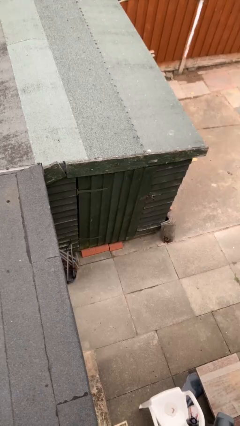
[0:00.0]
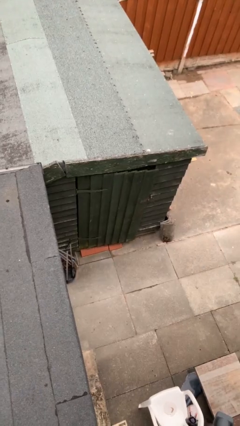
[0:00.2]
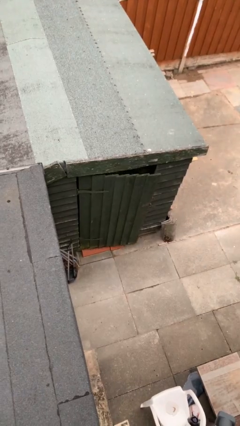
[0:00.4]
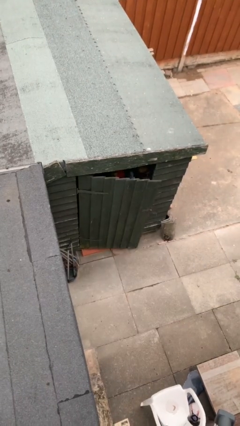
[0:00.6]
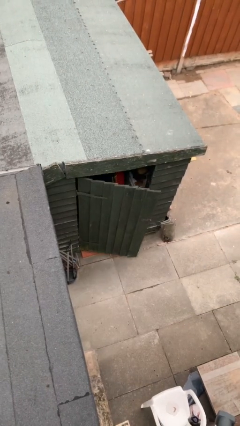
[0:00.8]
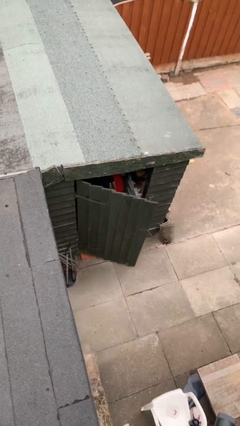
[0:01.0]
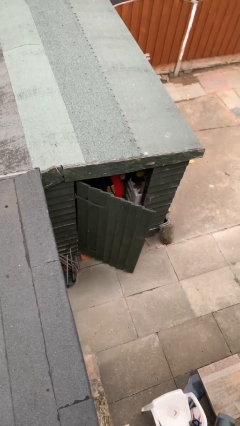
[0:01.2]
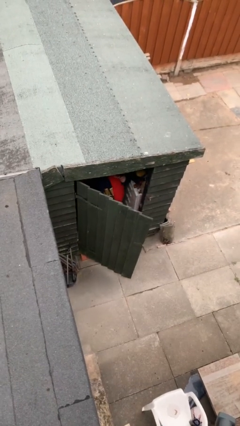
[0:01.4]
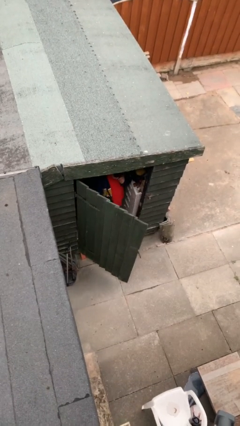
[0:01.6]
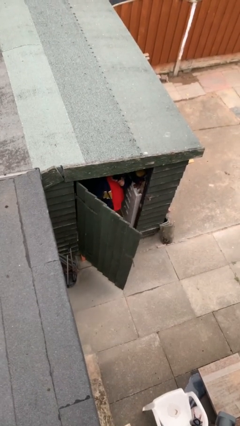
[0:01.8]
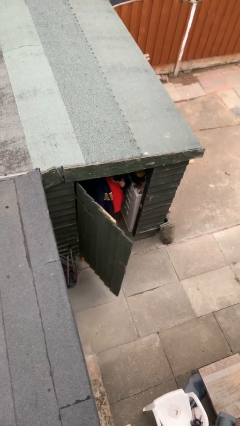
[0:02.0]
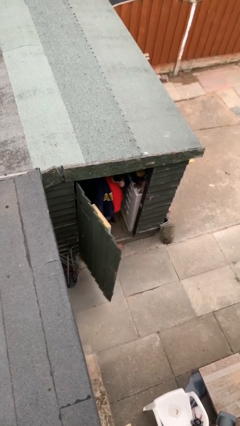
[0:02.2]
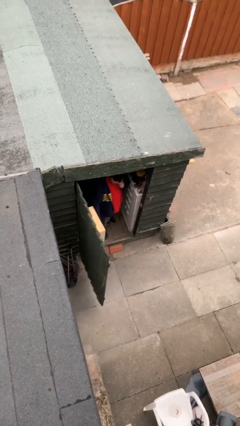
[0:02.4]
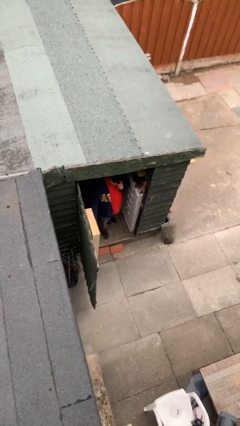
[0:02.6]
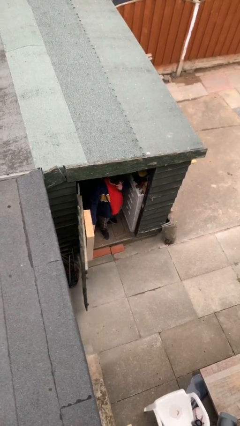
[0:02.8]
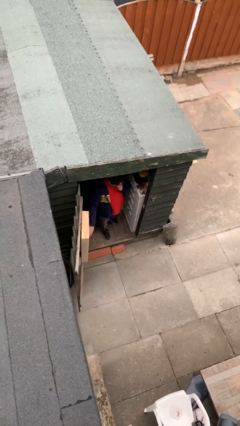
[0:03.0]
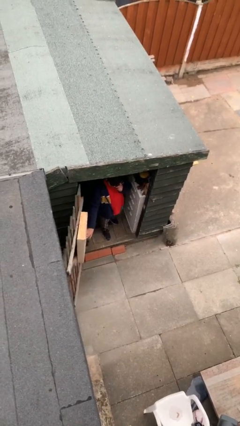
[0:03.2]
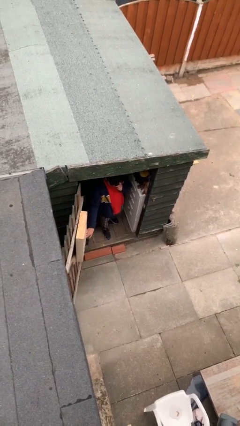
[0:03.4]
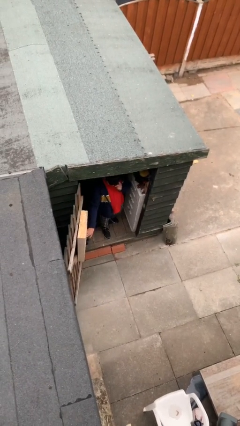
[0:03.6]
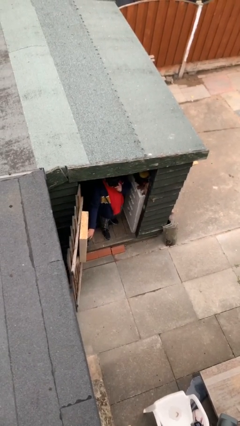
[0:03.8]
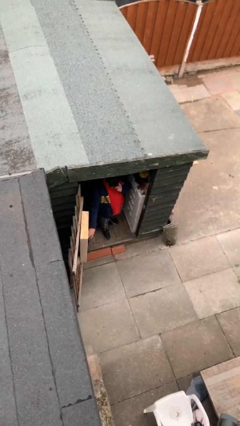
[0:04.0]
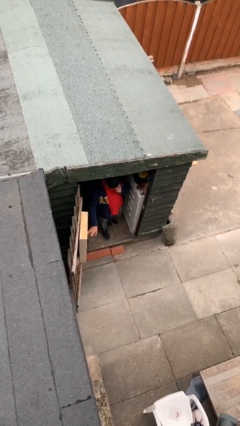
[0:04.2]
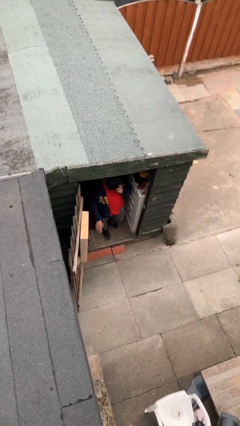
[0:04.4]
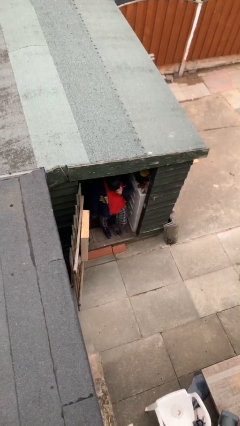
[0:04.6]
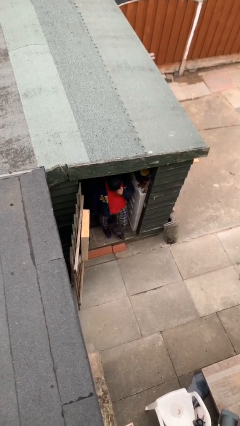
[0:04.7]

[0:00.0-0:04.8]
person opens facility door

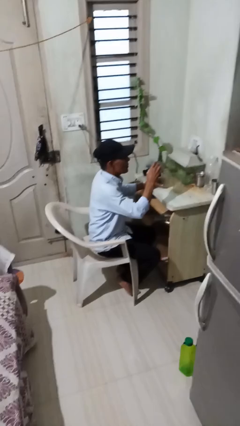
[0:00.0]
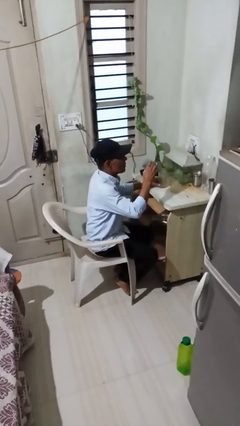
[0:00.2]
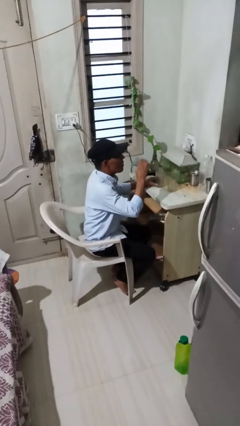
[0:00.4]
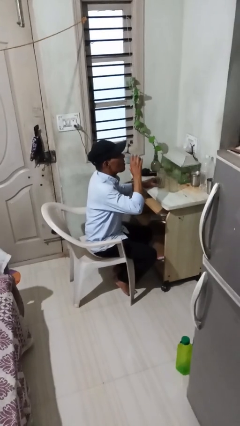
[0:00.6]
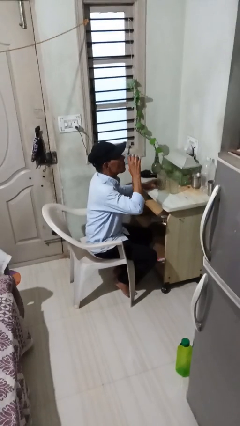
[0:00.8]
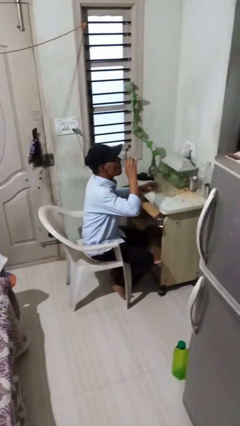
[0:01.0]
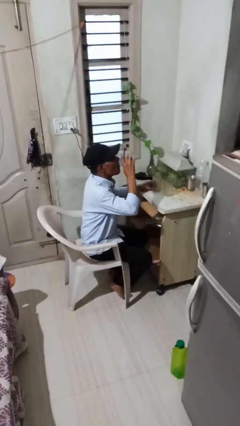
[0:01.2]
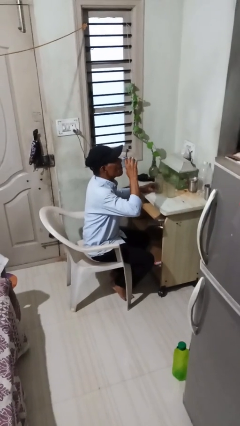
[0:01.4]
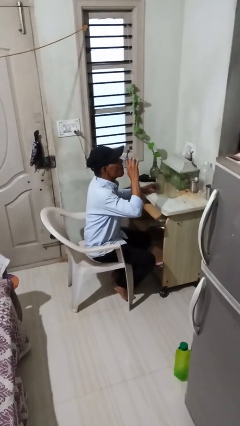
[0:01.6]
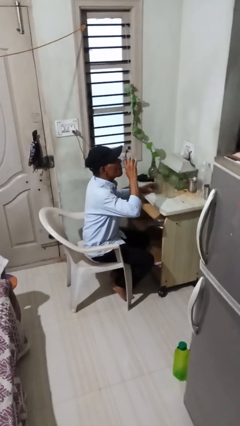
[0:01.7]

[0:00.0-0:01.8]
person drinks from shotglass

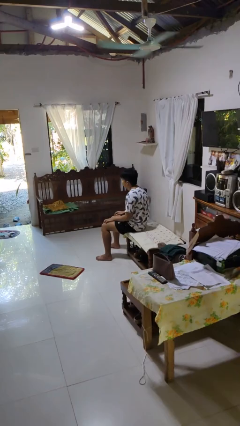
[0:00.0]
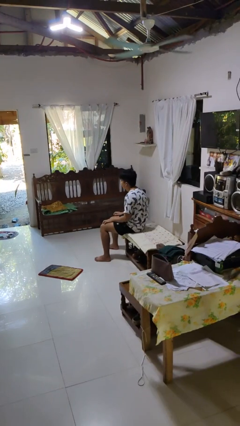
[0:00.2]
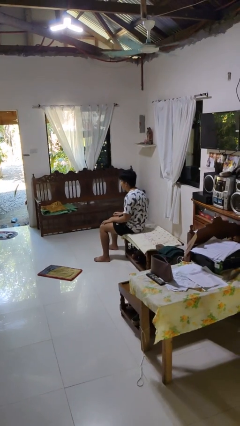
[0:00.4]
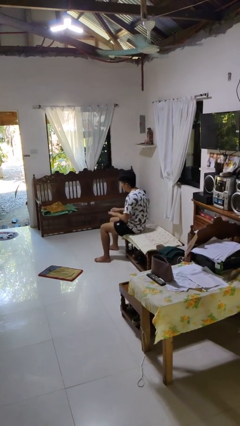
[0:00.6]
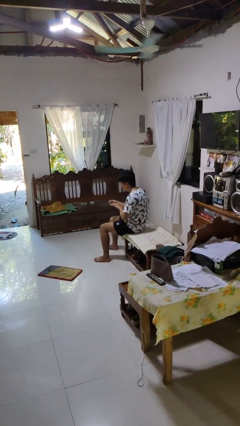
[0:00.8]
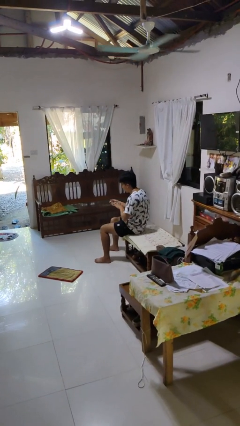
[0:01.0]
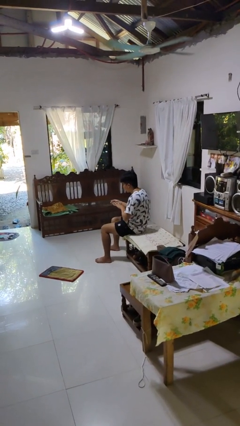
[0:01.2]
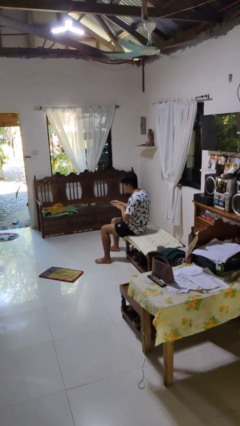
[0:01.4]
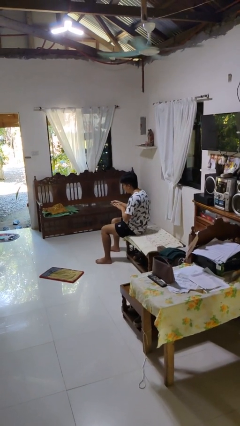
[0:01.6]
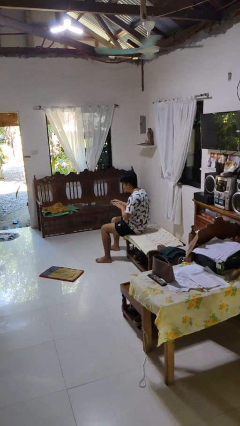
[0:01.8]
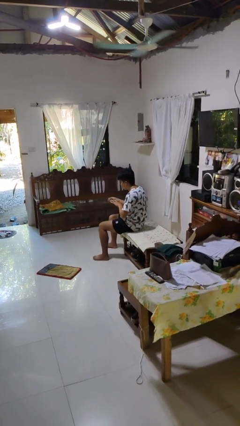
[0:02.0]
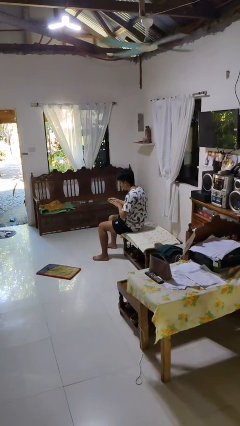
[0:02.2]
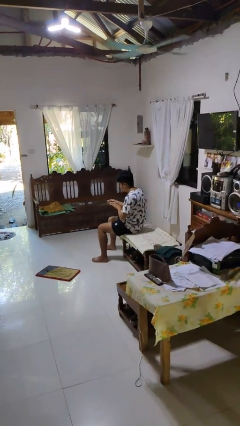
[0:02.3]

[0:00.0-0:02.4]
person clips fingernails

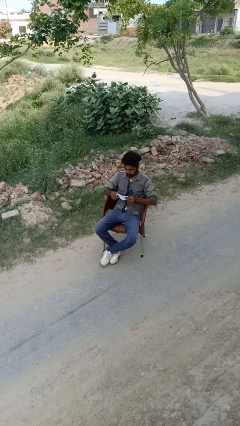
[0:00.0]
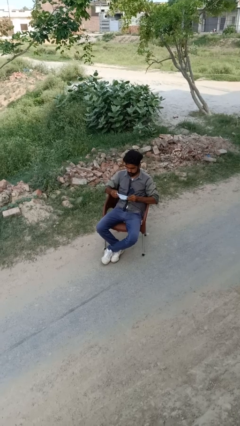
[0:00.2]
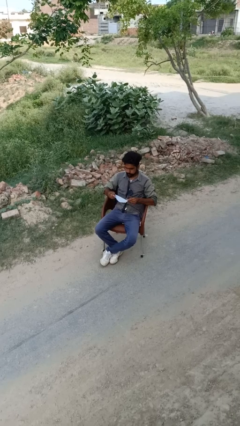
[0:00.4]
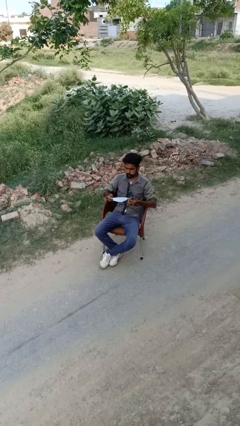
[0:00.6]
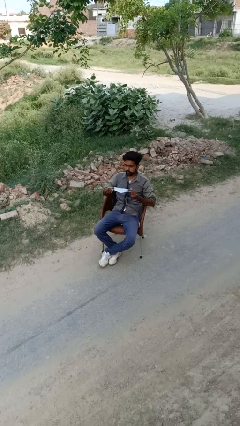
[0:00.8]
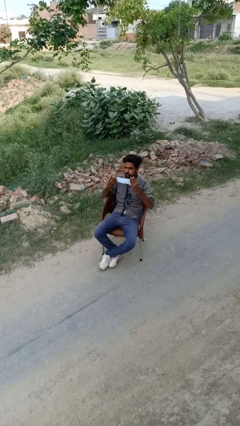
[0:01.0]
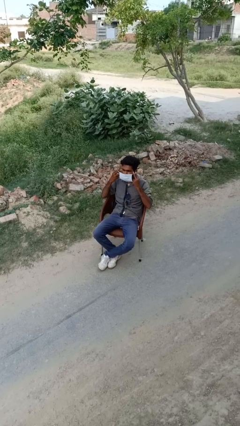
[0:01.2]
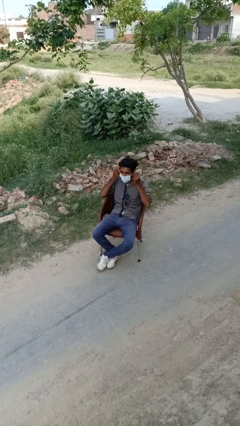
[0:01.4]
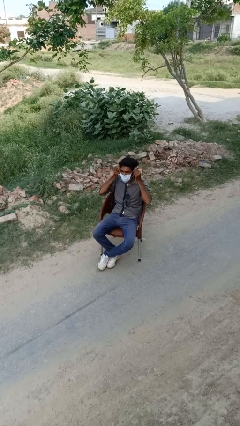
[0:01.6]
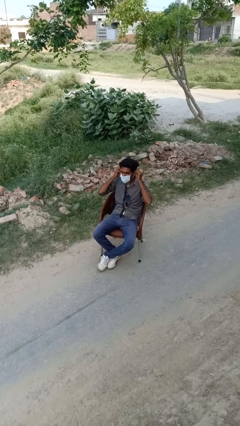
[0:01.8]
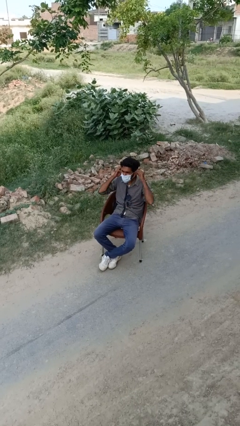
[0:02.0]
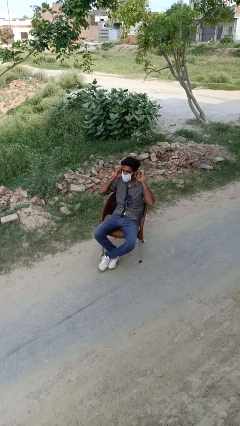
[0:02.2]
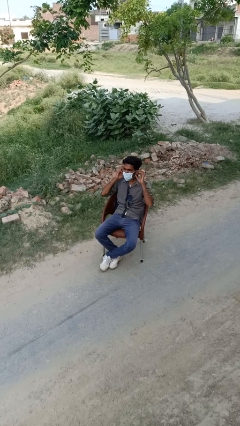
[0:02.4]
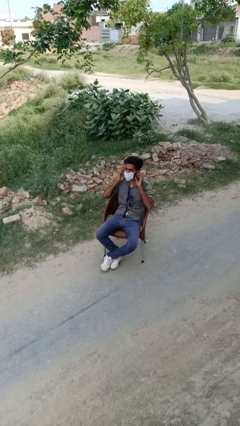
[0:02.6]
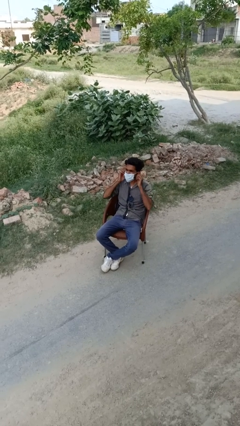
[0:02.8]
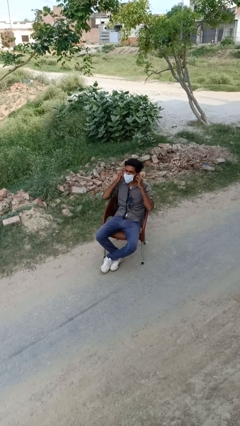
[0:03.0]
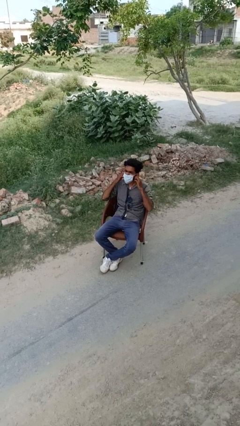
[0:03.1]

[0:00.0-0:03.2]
person puts on facemask

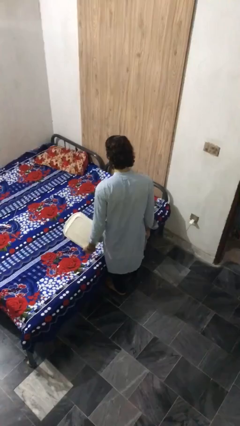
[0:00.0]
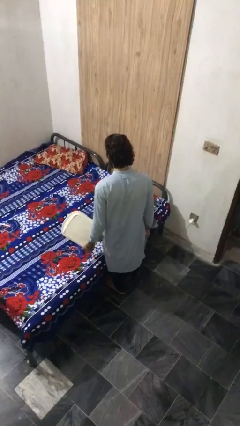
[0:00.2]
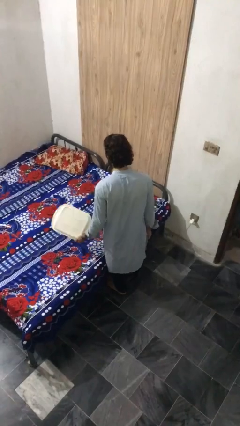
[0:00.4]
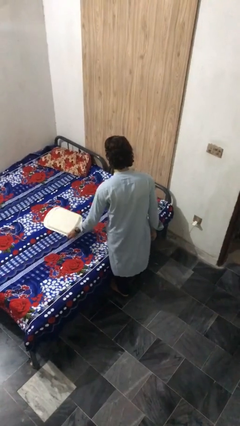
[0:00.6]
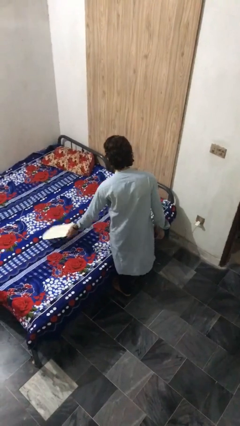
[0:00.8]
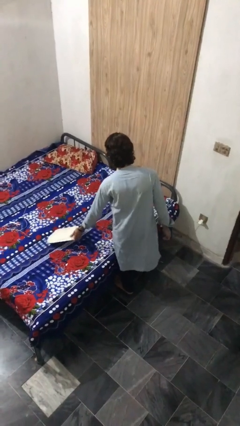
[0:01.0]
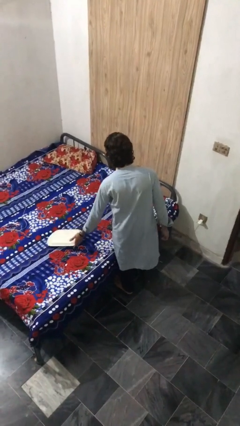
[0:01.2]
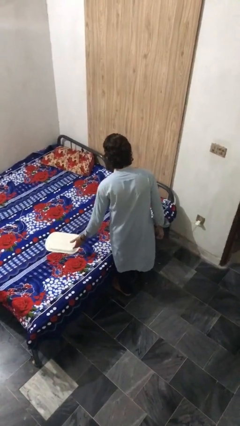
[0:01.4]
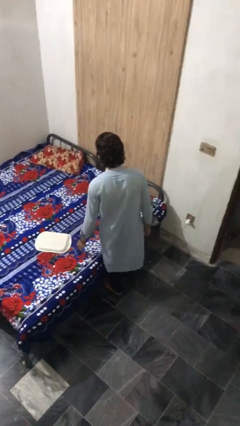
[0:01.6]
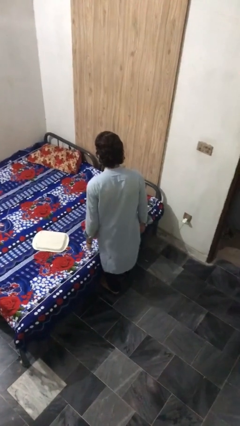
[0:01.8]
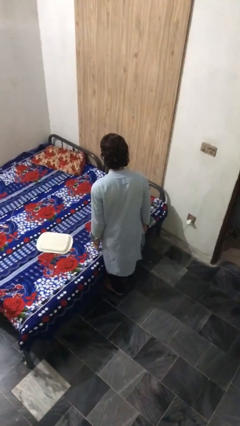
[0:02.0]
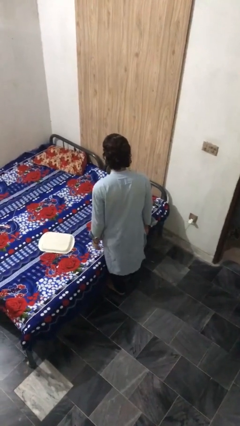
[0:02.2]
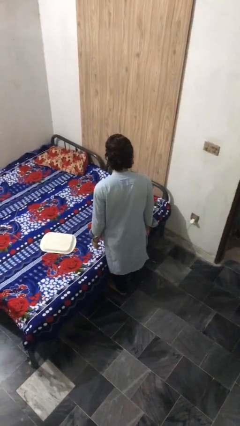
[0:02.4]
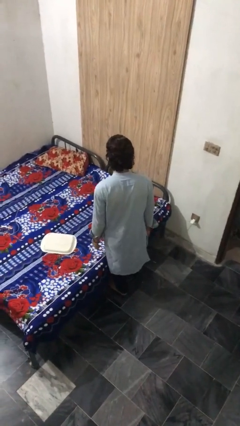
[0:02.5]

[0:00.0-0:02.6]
person puts down object on bed

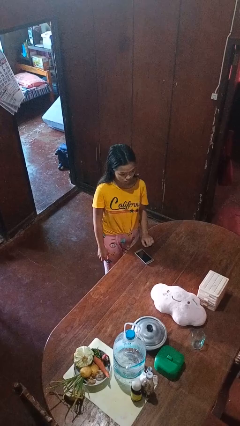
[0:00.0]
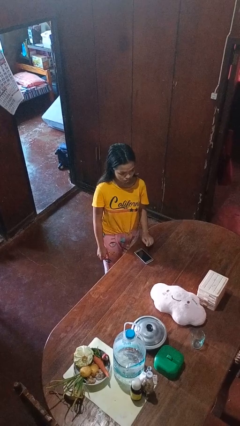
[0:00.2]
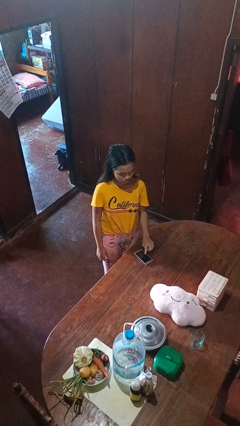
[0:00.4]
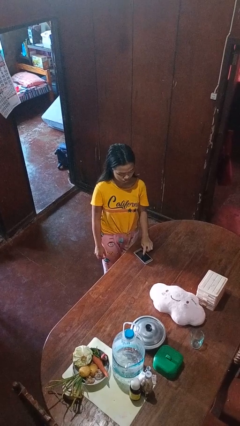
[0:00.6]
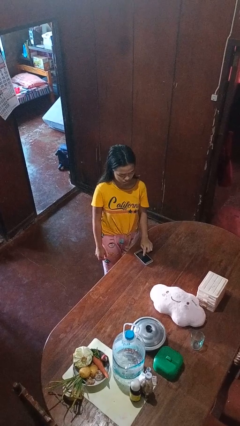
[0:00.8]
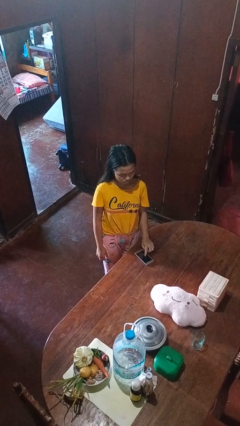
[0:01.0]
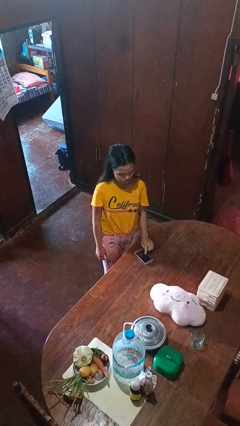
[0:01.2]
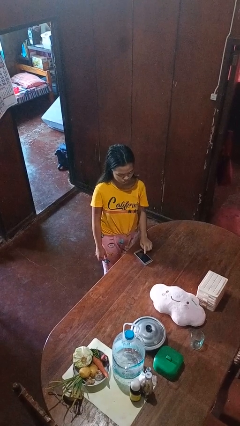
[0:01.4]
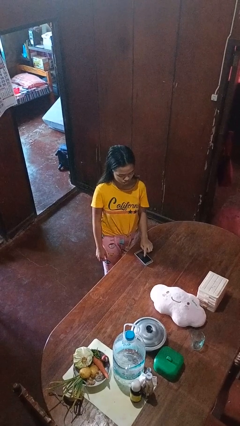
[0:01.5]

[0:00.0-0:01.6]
person taps object with finger

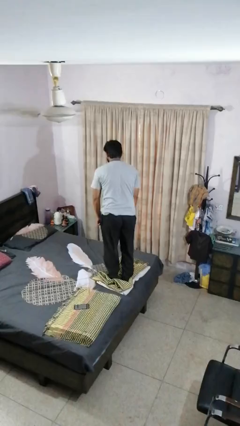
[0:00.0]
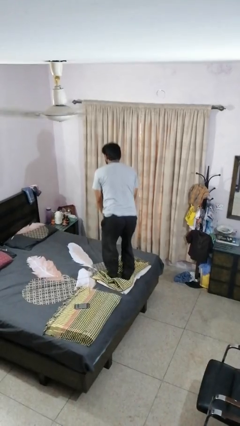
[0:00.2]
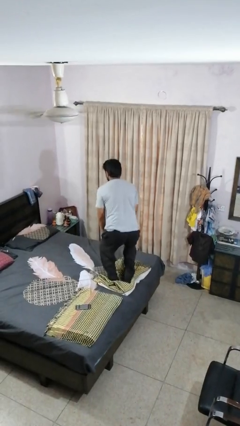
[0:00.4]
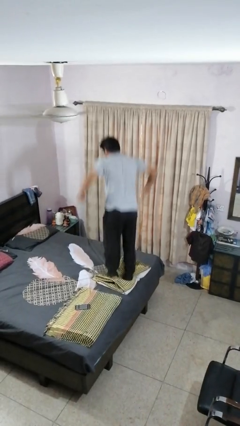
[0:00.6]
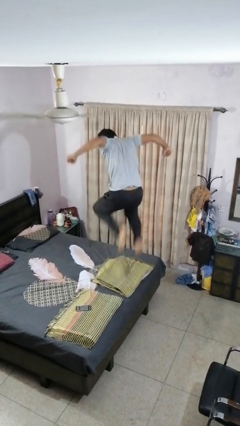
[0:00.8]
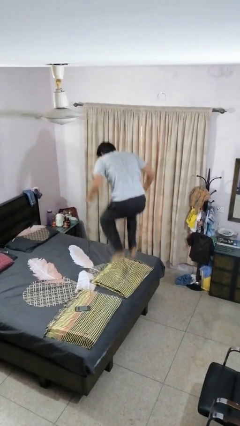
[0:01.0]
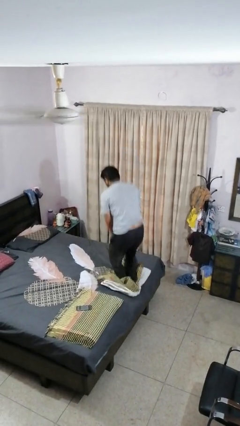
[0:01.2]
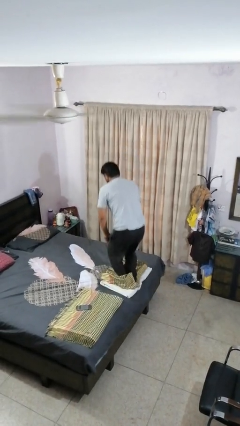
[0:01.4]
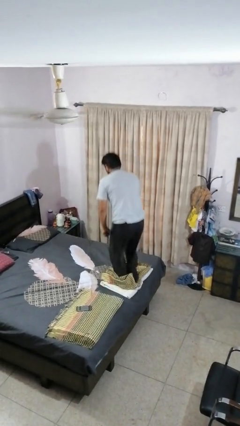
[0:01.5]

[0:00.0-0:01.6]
person jumps on bed
